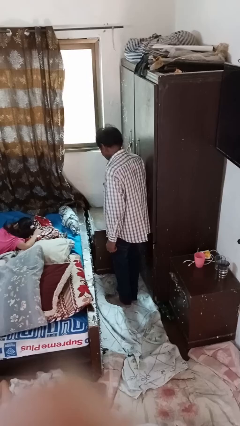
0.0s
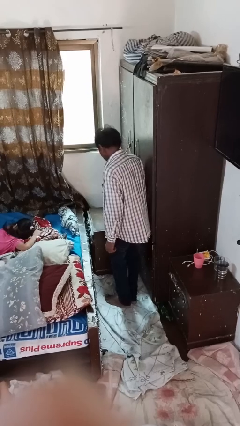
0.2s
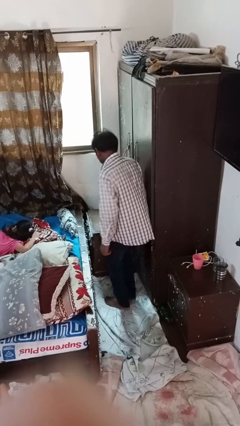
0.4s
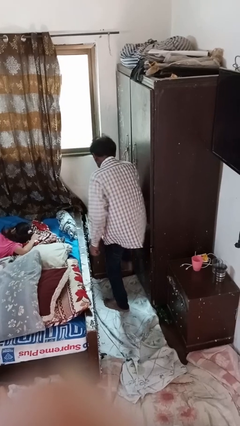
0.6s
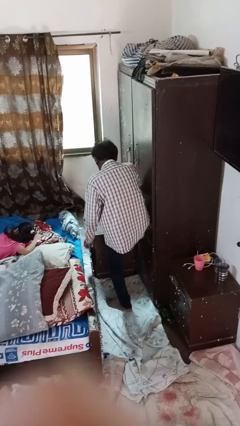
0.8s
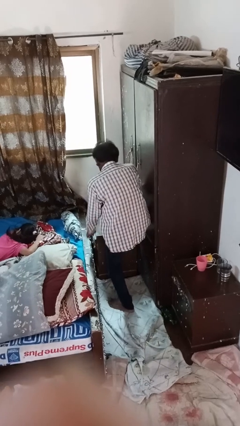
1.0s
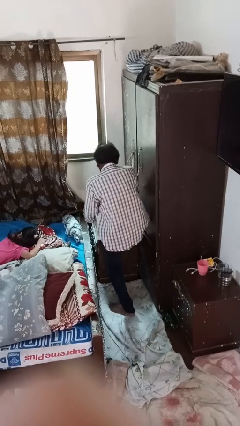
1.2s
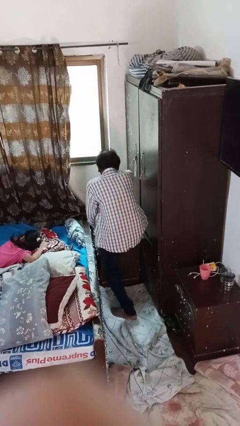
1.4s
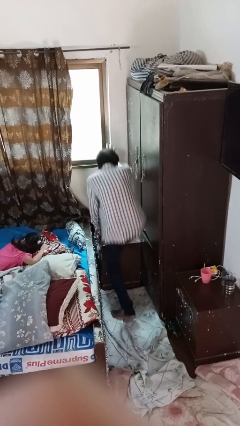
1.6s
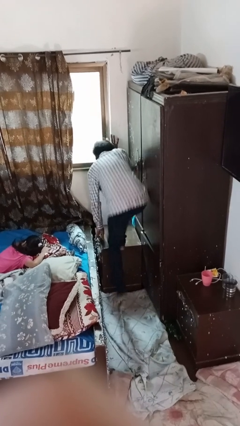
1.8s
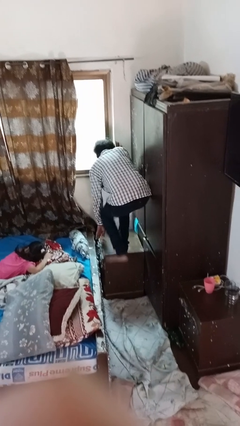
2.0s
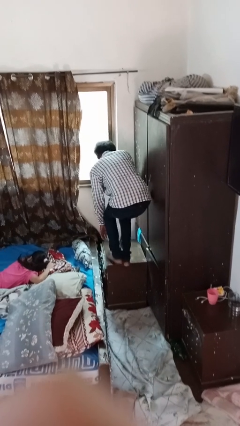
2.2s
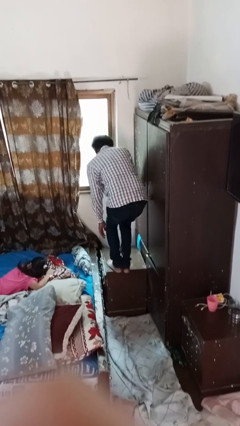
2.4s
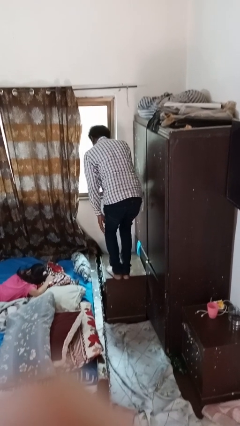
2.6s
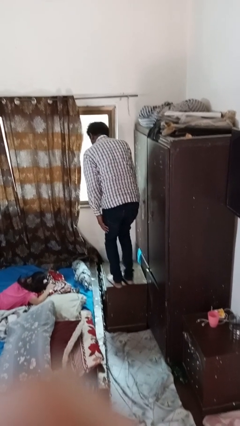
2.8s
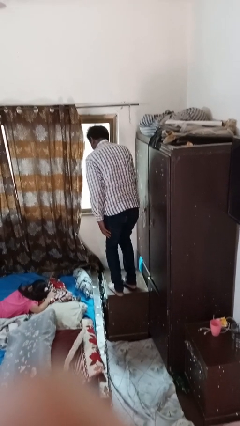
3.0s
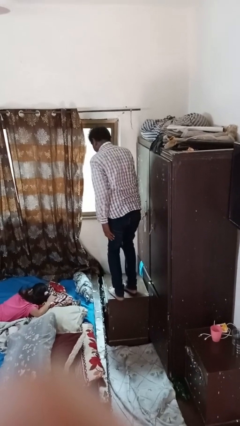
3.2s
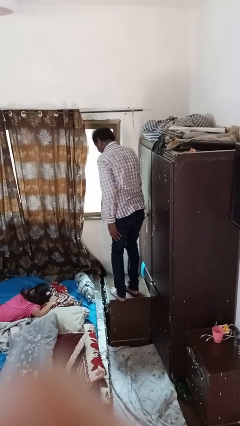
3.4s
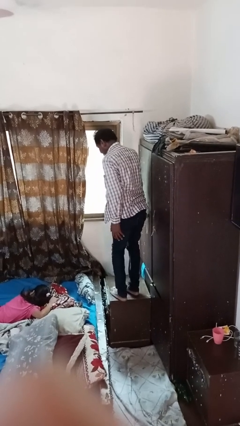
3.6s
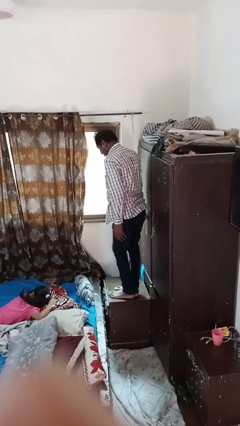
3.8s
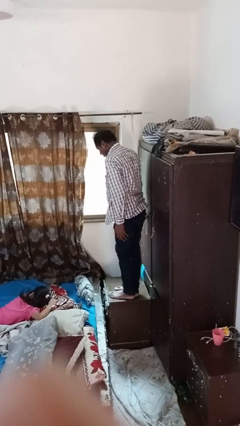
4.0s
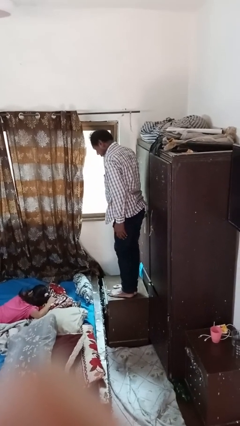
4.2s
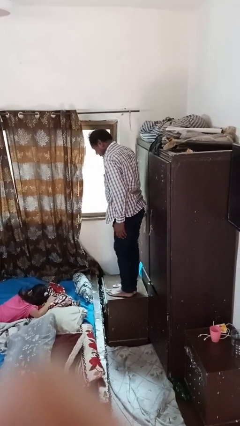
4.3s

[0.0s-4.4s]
person climbs on table

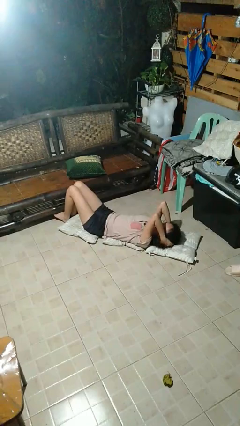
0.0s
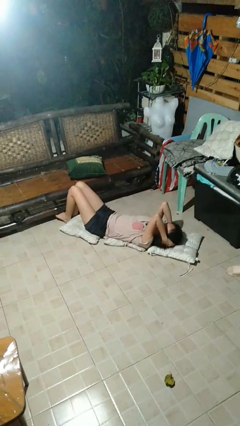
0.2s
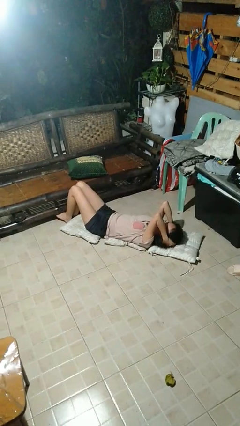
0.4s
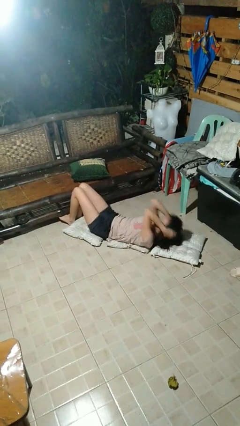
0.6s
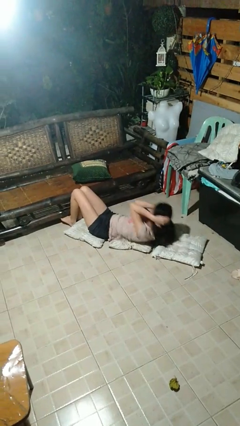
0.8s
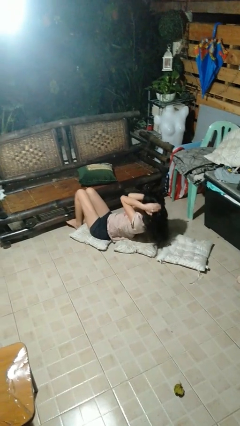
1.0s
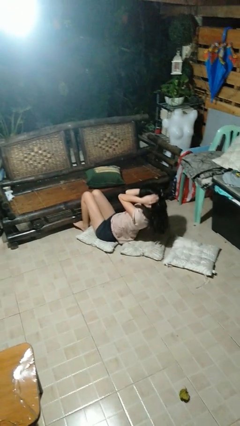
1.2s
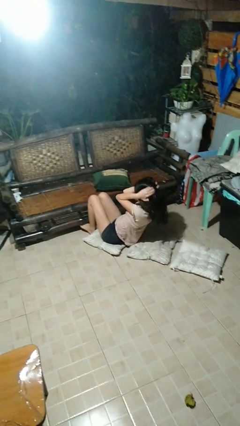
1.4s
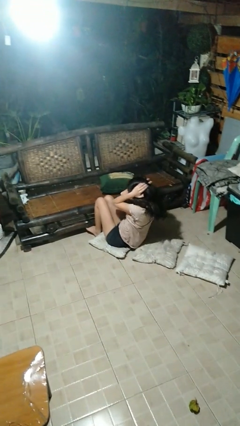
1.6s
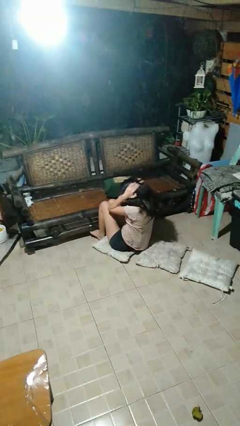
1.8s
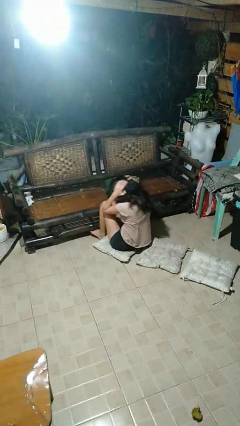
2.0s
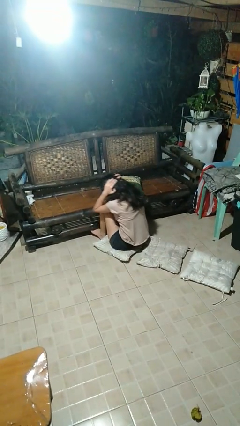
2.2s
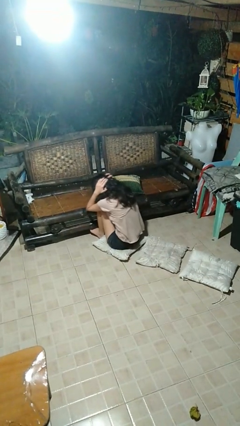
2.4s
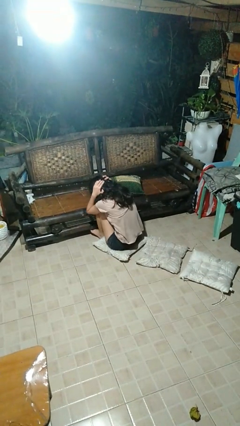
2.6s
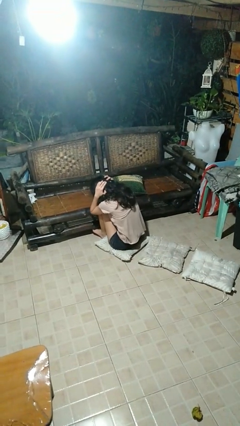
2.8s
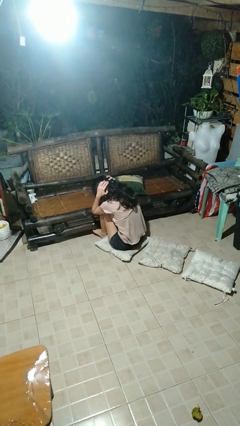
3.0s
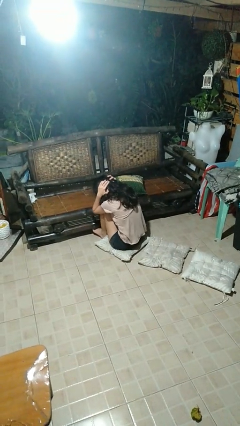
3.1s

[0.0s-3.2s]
person exercises with situp

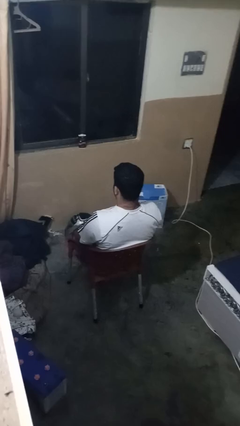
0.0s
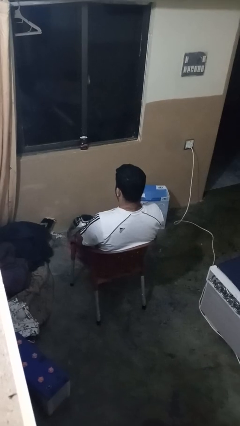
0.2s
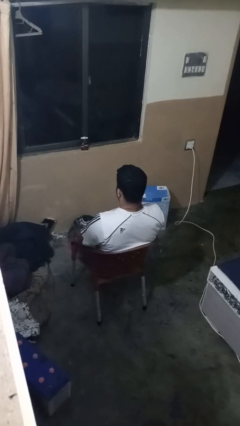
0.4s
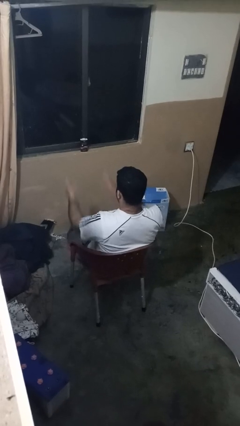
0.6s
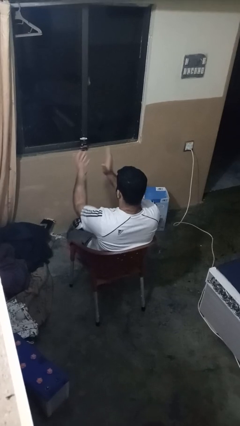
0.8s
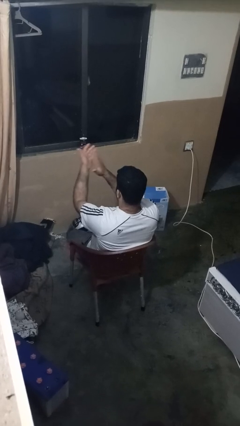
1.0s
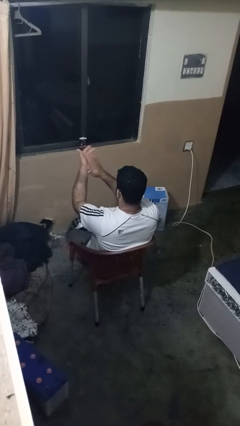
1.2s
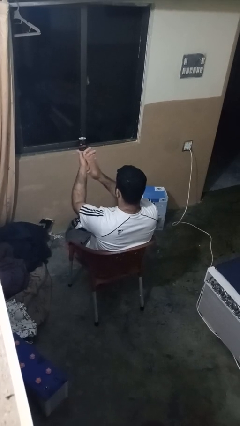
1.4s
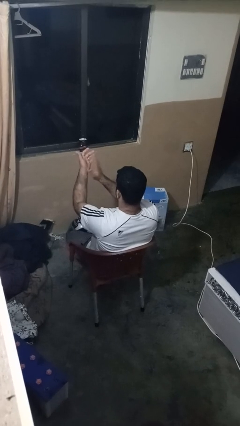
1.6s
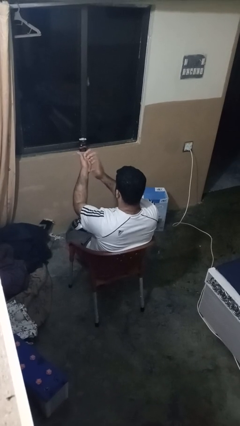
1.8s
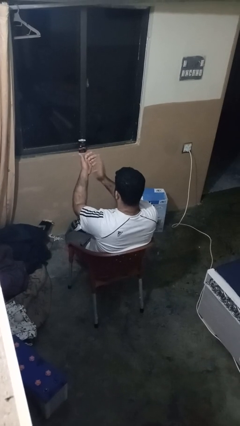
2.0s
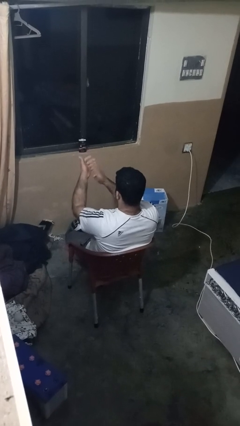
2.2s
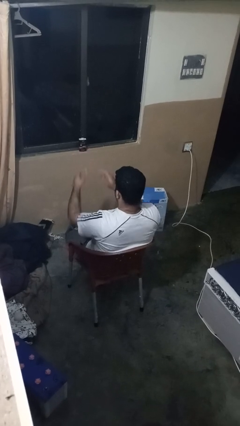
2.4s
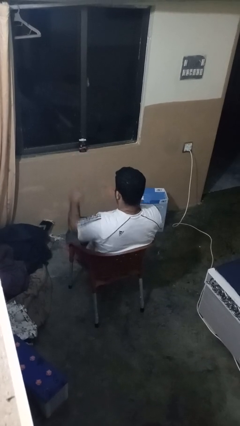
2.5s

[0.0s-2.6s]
person slaps hands on thighs

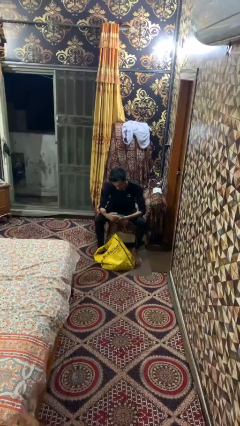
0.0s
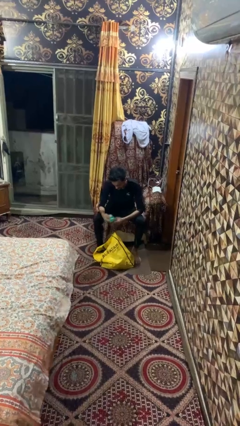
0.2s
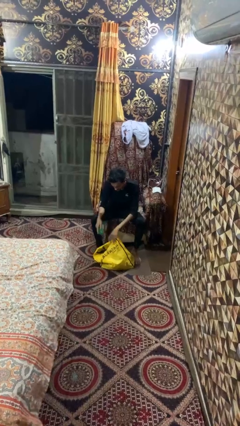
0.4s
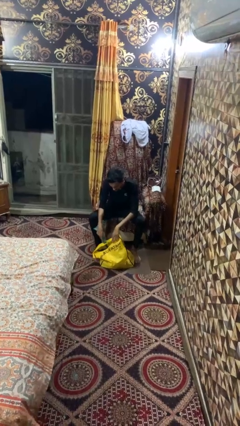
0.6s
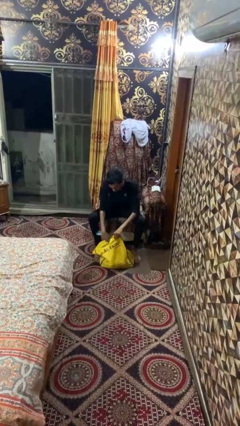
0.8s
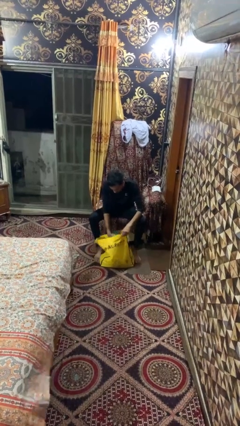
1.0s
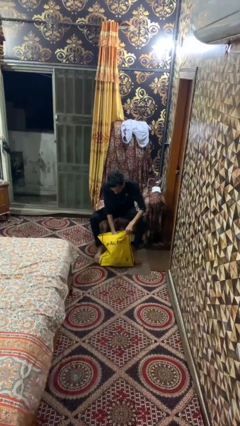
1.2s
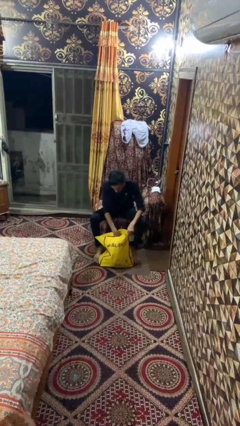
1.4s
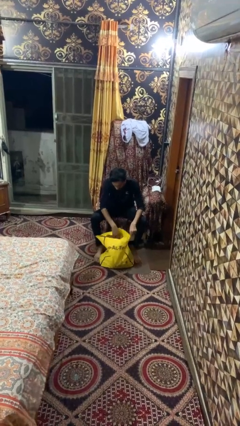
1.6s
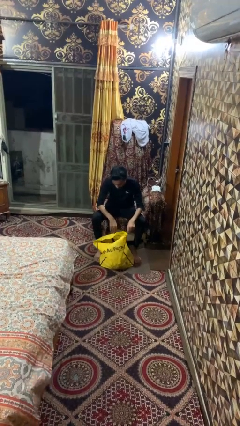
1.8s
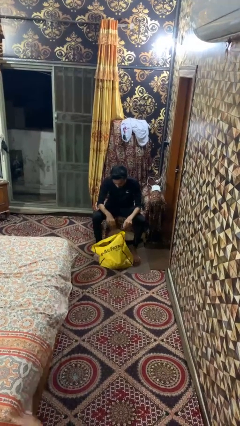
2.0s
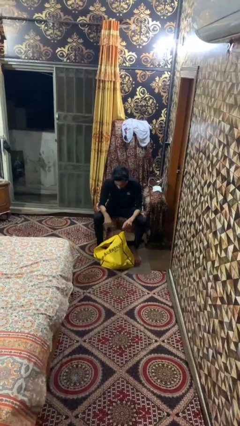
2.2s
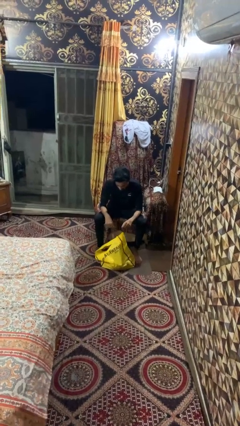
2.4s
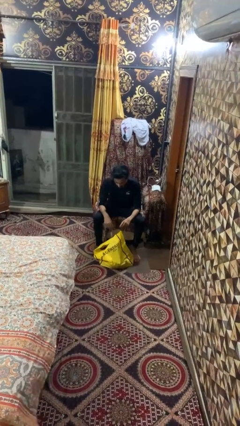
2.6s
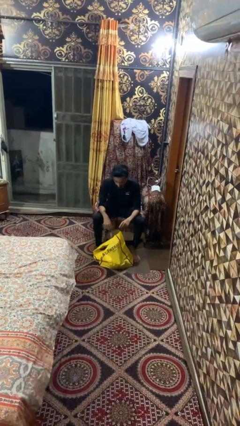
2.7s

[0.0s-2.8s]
person puts object into bag

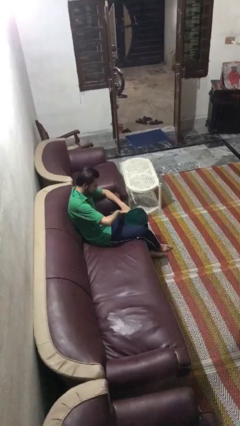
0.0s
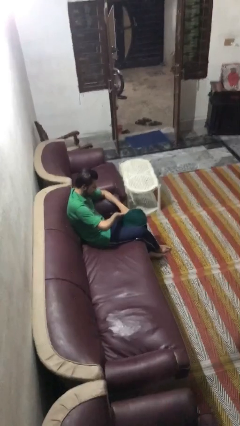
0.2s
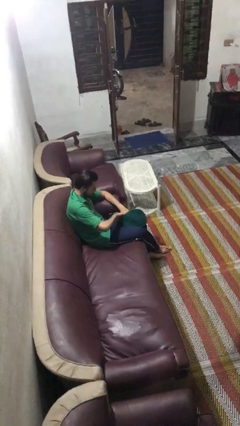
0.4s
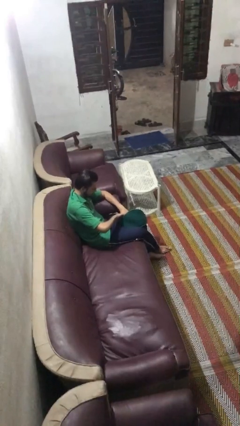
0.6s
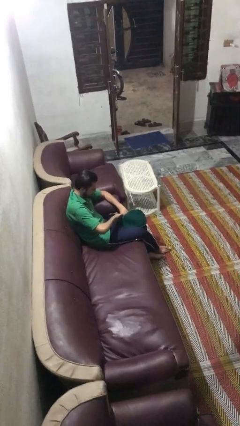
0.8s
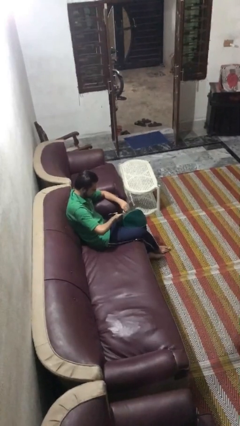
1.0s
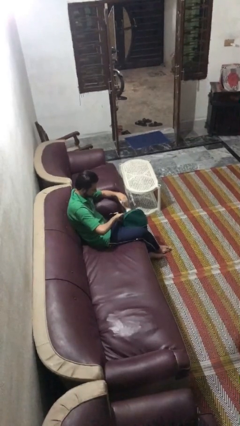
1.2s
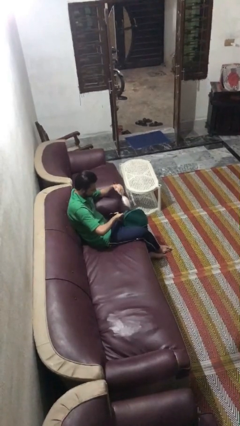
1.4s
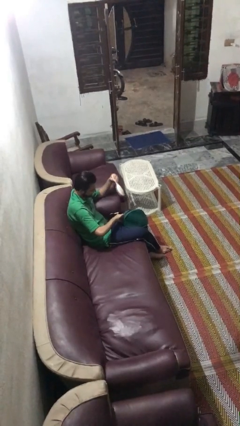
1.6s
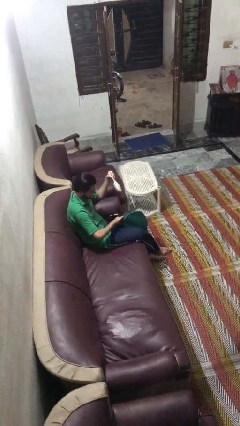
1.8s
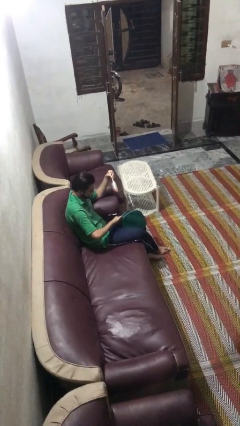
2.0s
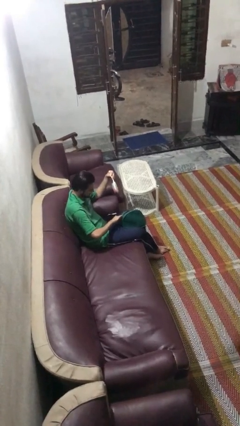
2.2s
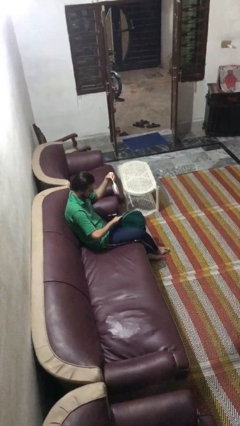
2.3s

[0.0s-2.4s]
person takes object from purse

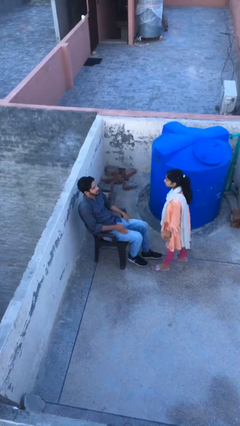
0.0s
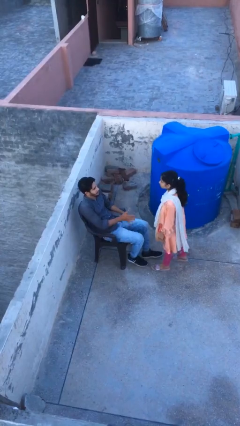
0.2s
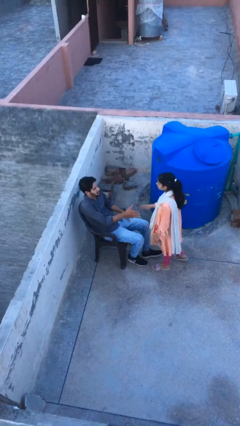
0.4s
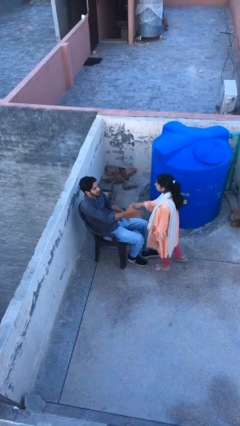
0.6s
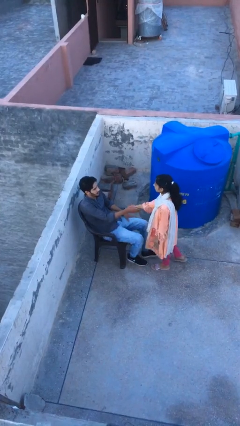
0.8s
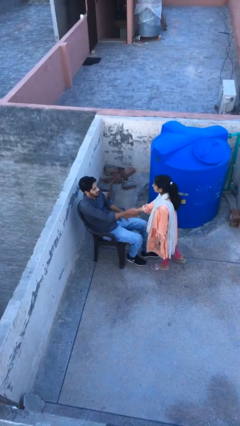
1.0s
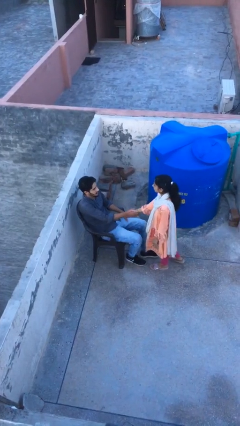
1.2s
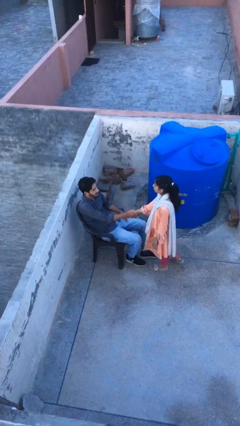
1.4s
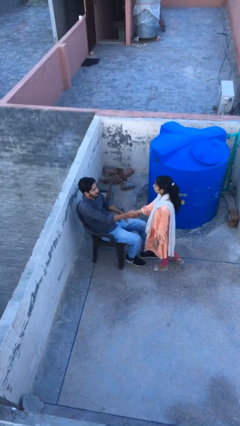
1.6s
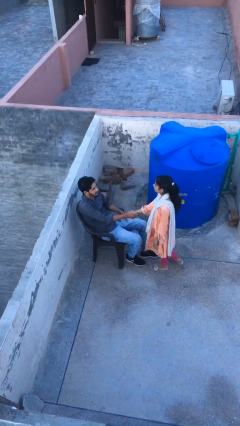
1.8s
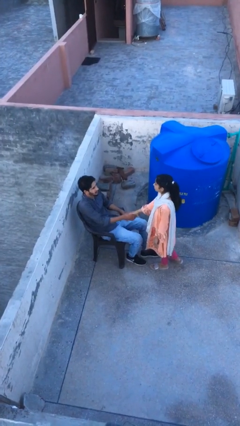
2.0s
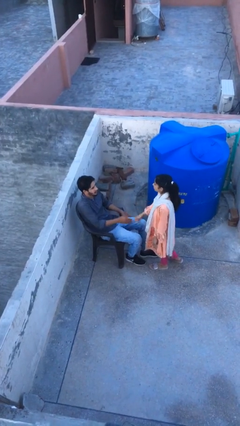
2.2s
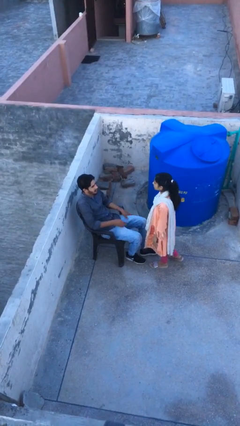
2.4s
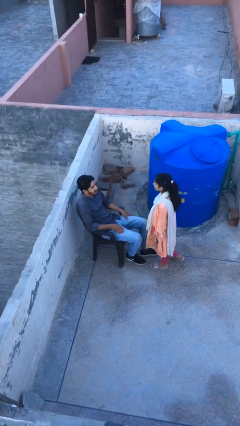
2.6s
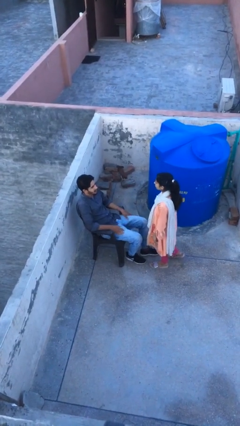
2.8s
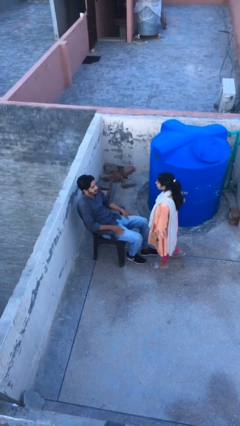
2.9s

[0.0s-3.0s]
person shakes hand
